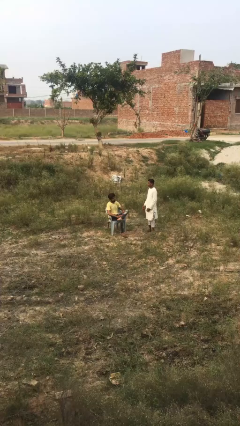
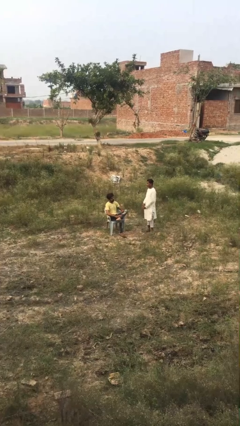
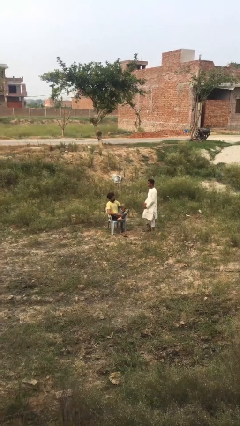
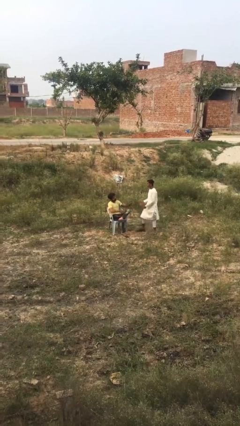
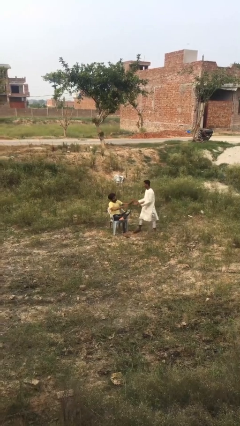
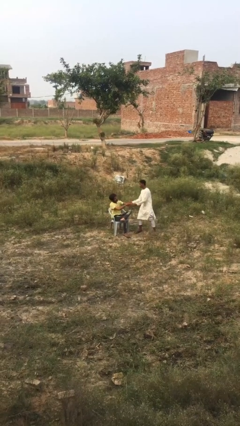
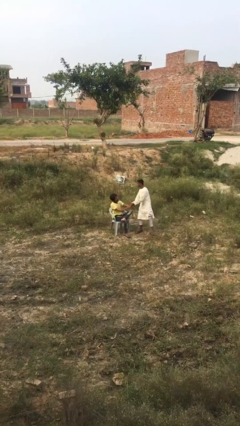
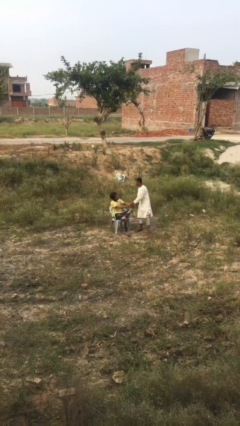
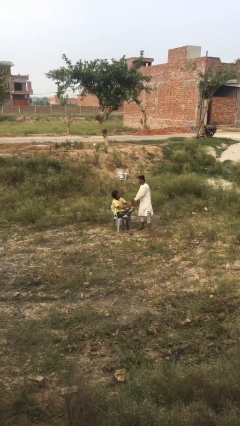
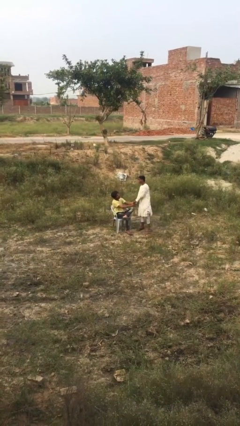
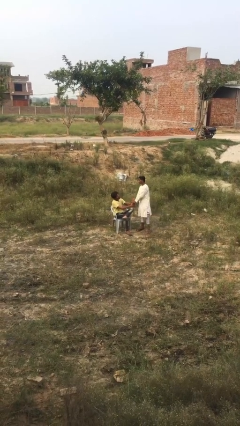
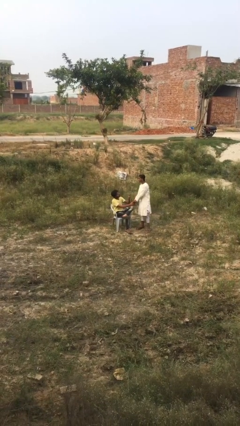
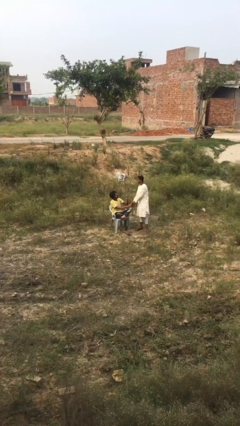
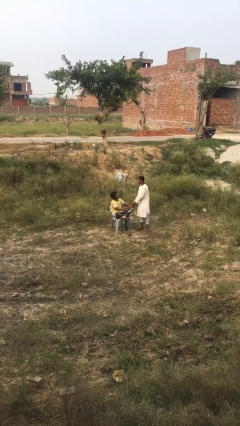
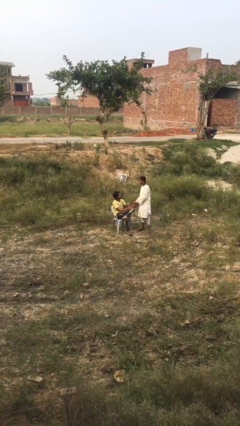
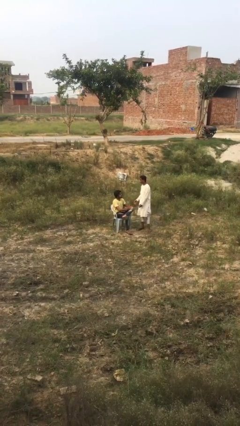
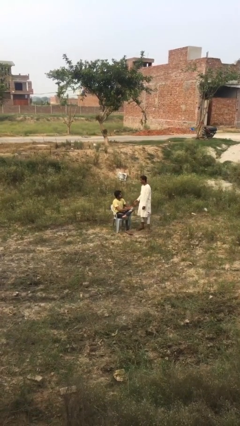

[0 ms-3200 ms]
person shakes hand

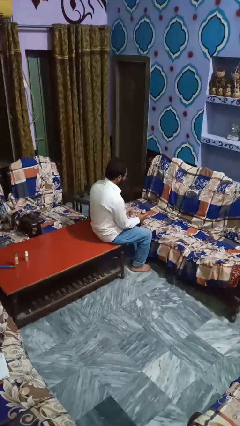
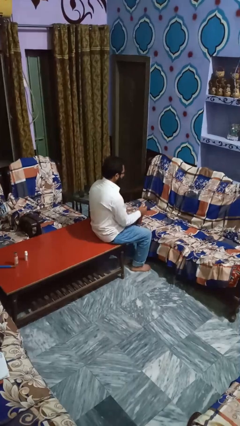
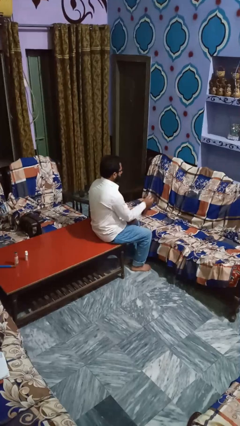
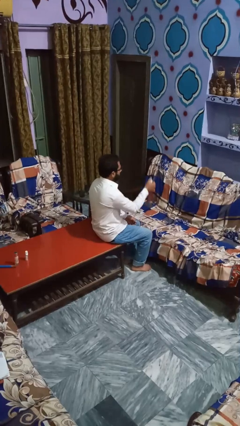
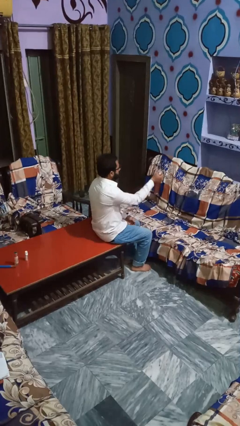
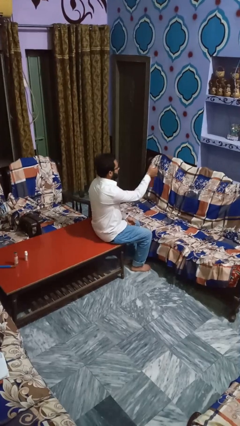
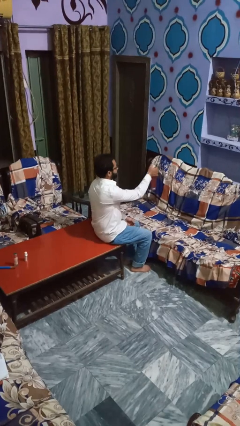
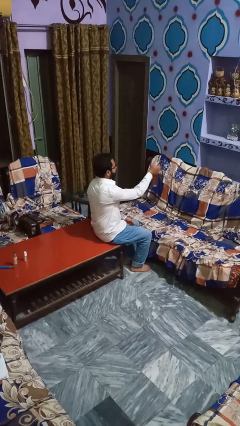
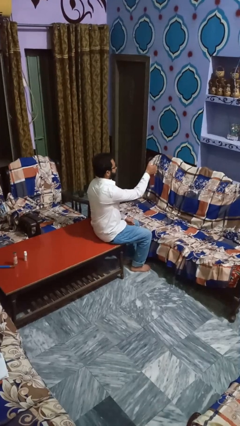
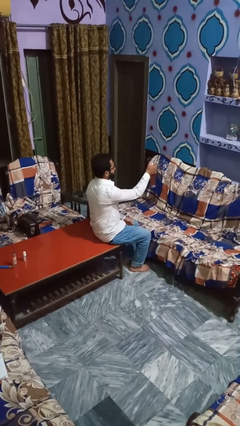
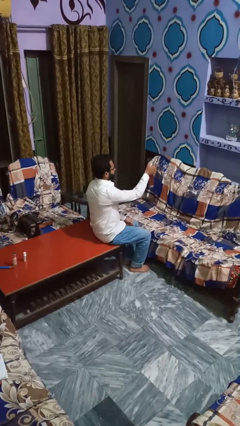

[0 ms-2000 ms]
person sprays from bottle

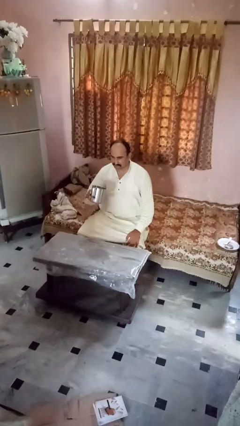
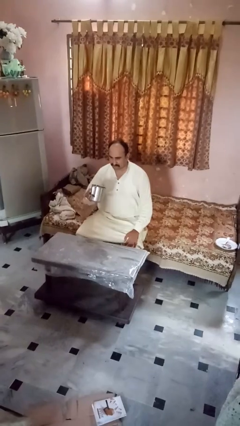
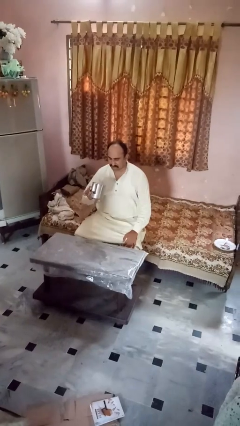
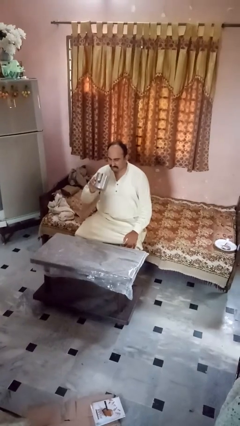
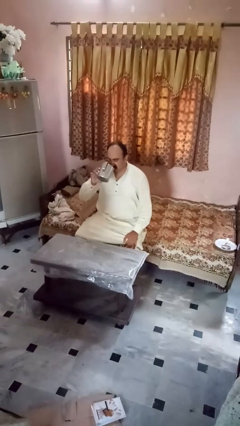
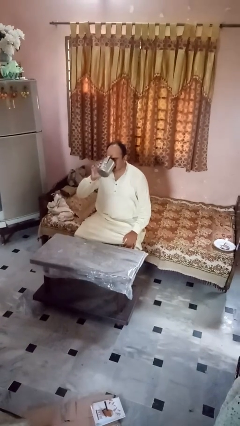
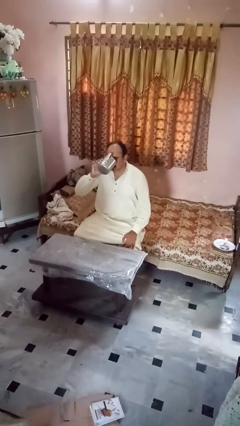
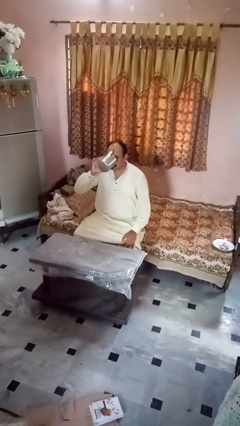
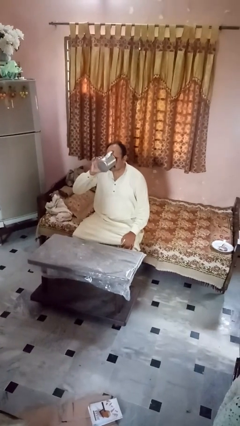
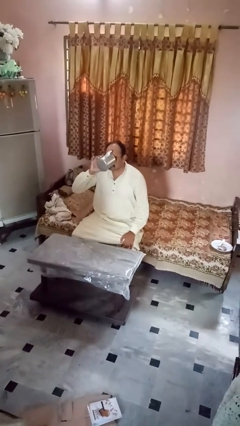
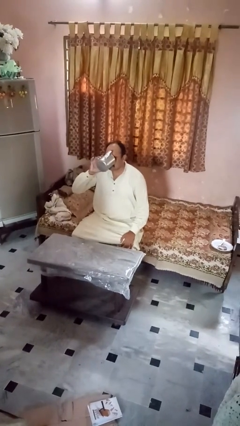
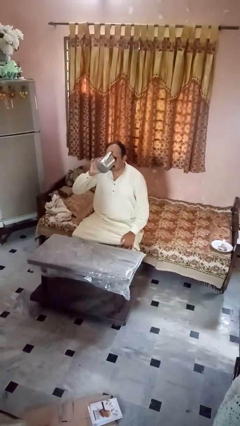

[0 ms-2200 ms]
person drinks from mug

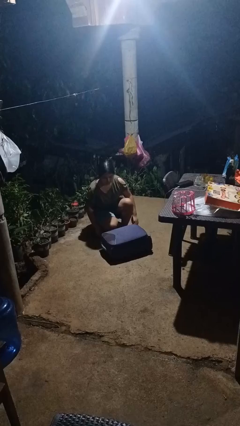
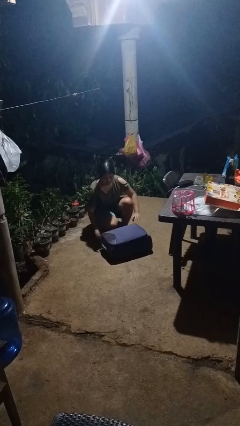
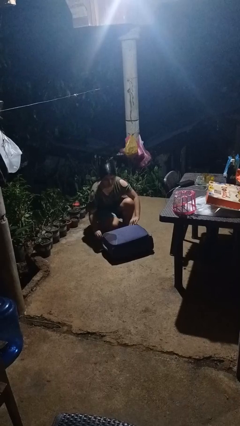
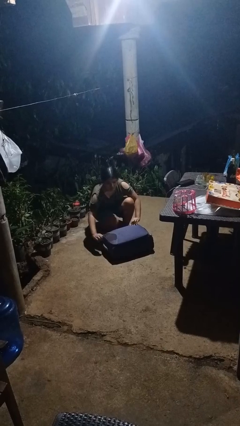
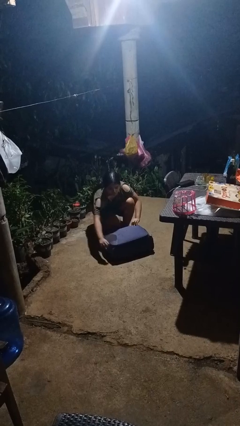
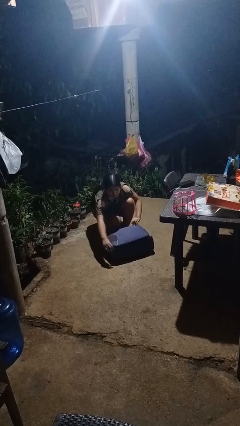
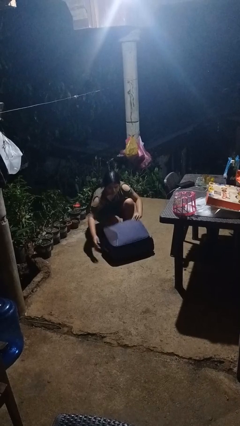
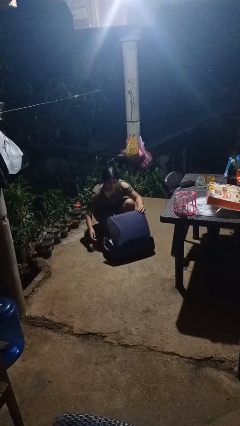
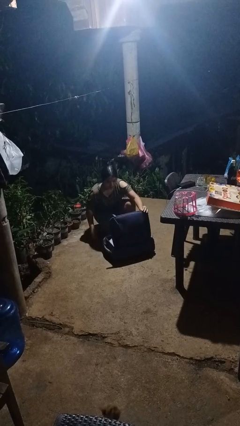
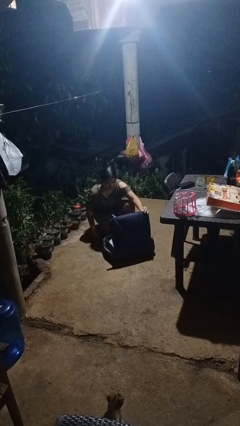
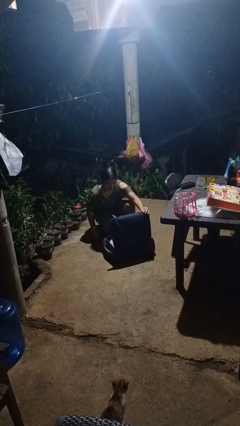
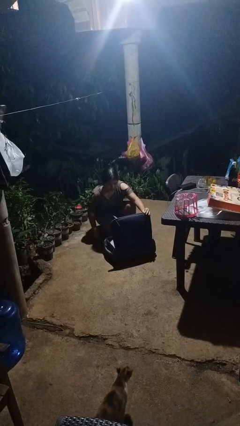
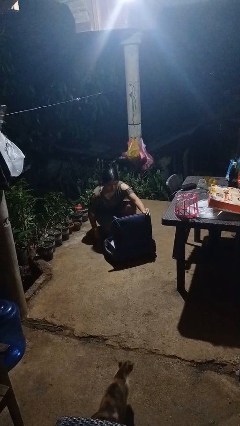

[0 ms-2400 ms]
person opens suitcase

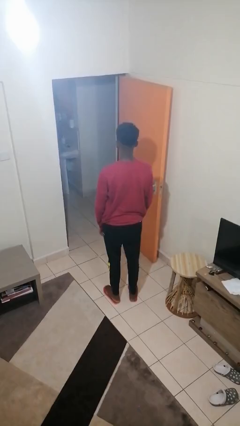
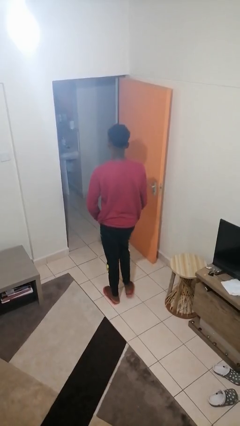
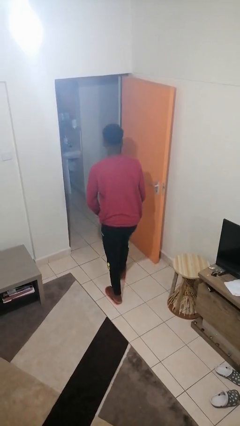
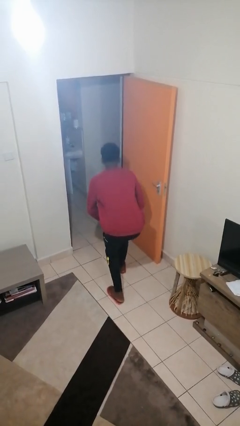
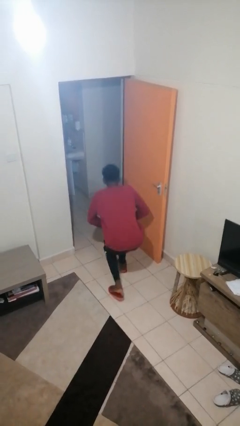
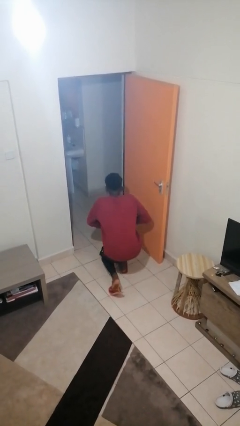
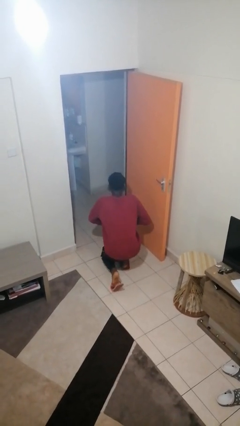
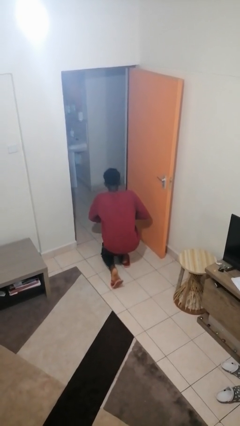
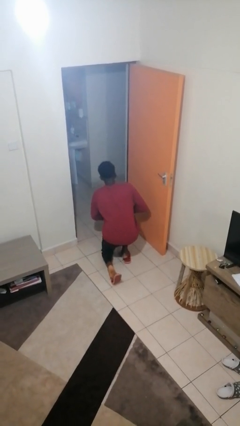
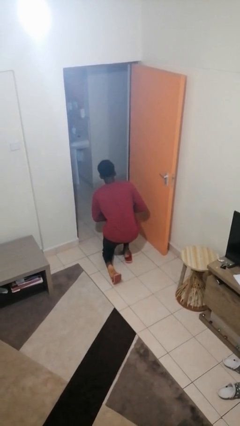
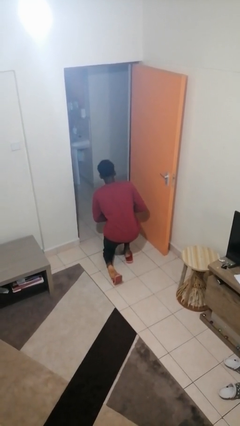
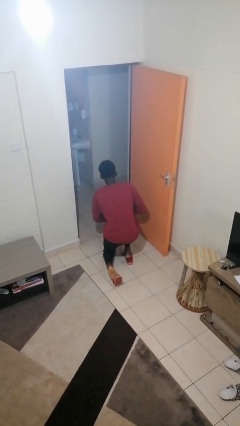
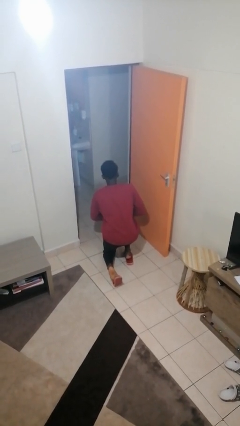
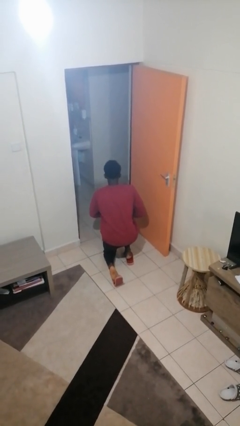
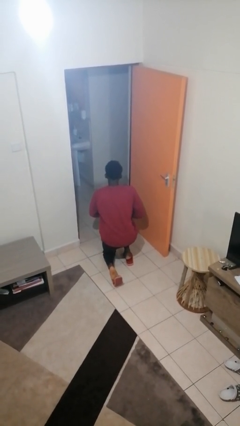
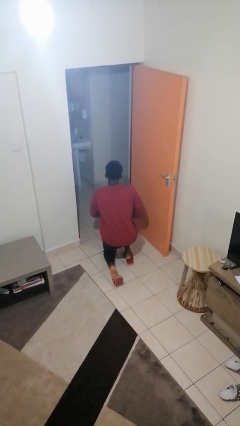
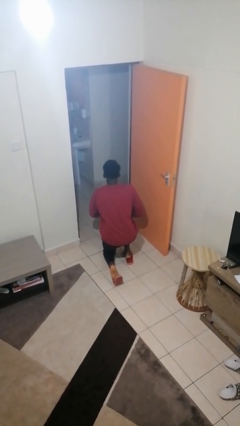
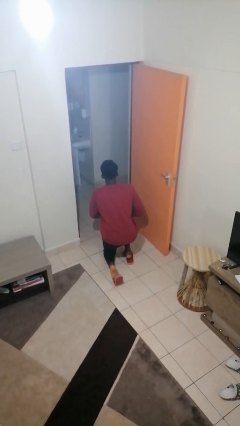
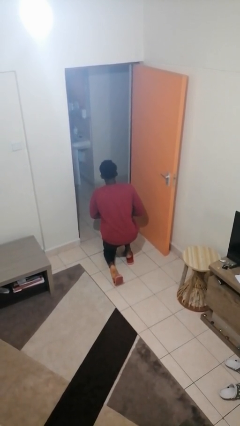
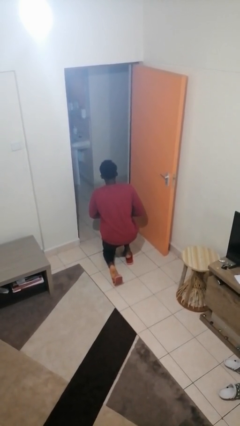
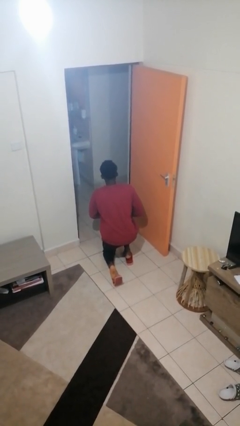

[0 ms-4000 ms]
person kneels

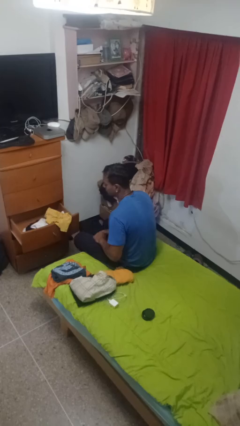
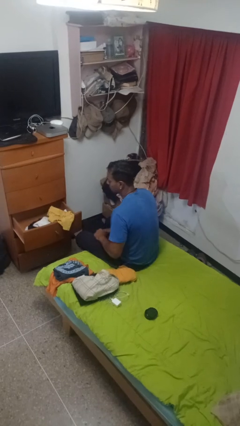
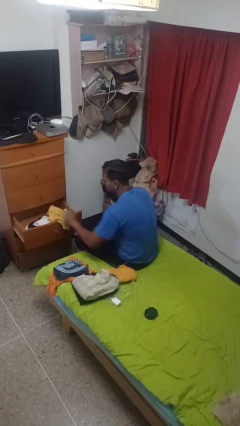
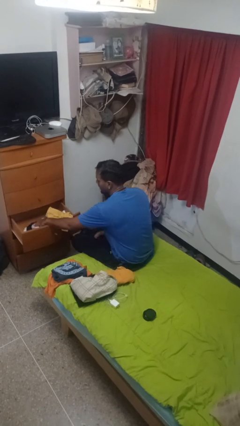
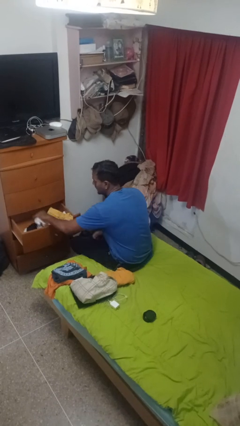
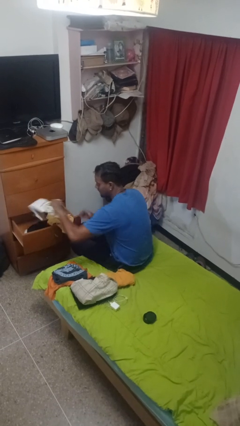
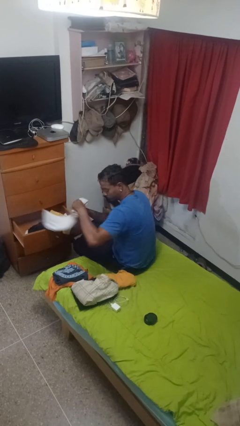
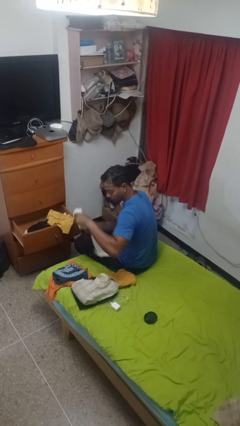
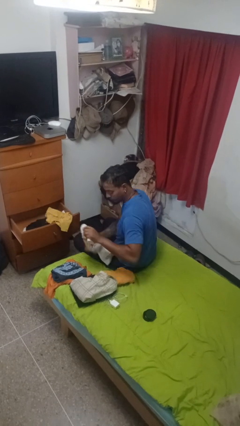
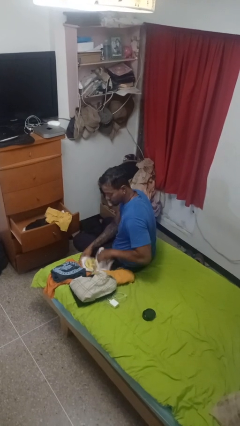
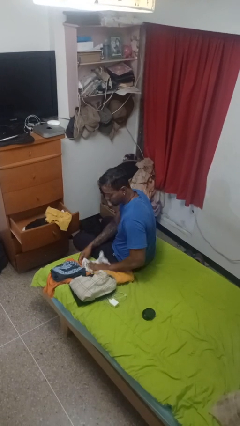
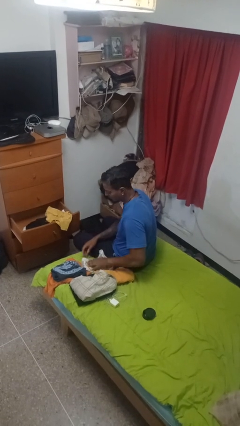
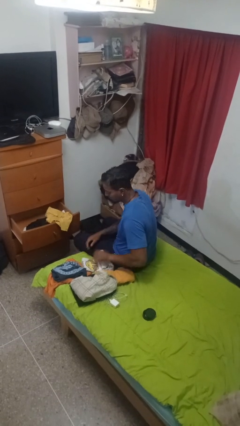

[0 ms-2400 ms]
person takes clothes from dresser

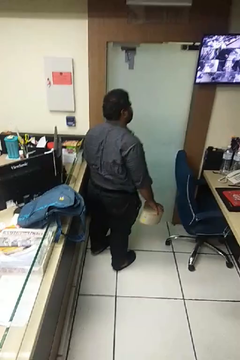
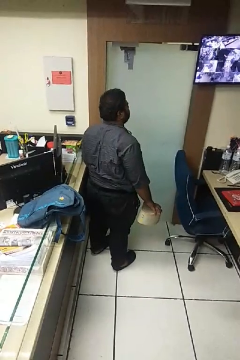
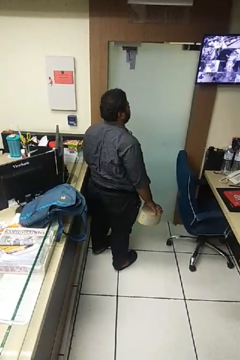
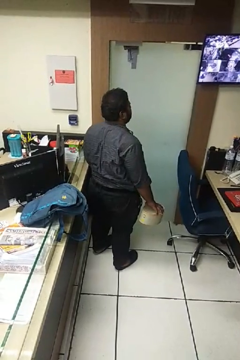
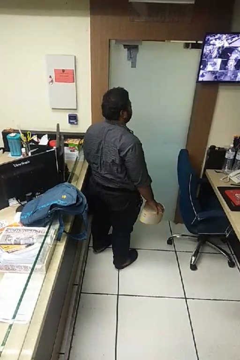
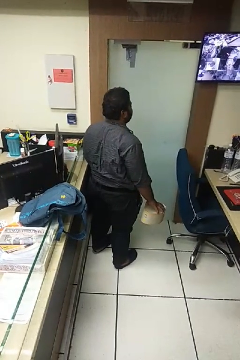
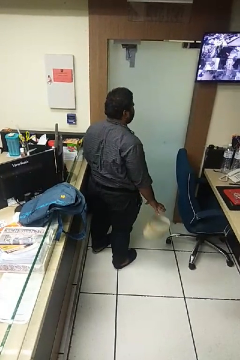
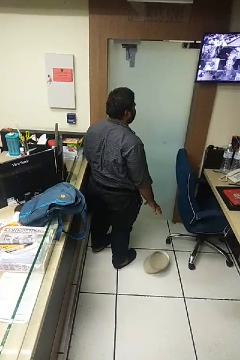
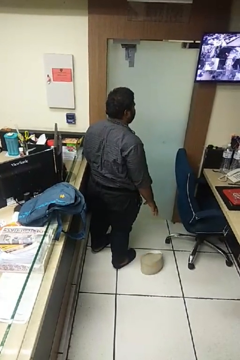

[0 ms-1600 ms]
person drops object
